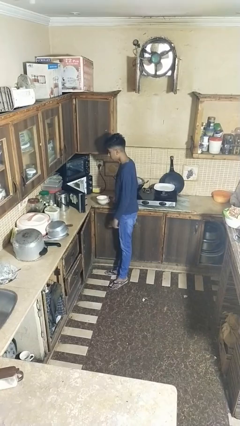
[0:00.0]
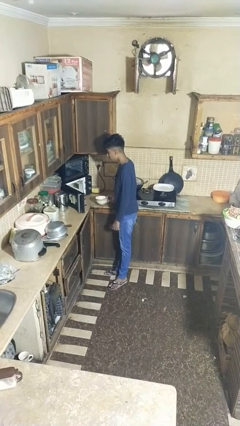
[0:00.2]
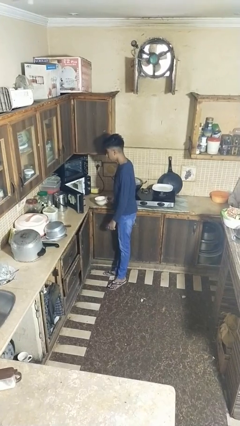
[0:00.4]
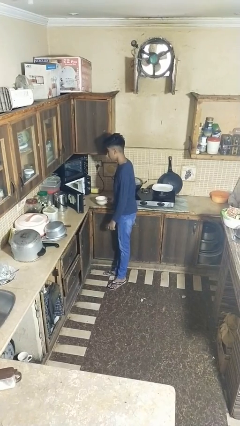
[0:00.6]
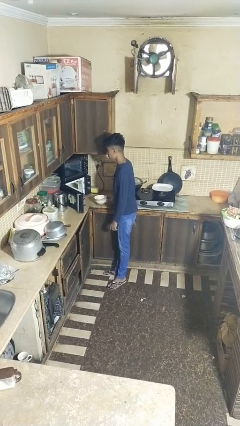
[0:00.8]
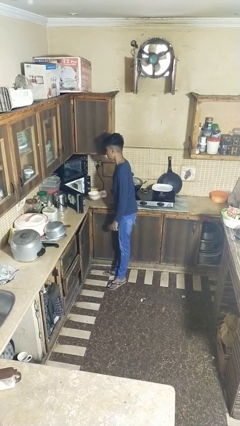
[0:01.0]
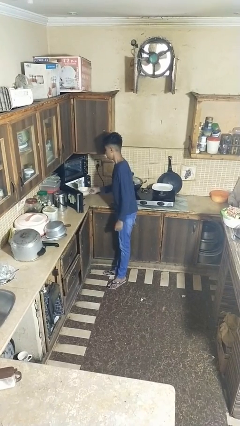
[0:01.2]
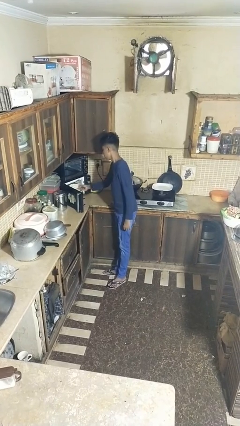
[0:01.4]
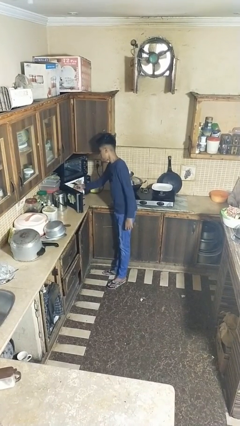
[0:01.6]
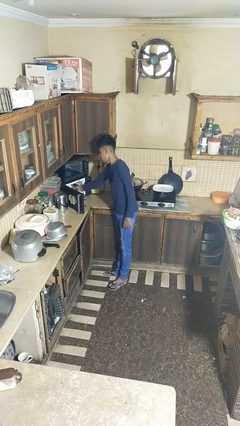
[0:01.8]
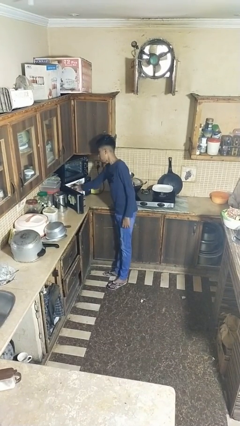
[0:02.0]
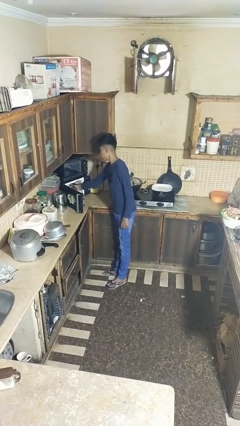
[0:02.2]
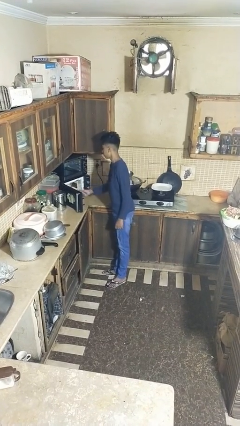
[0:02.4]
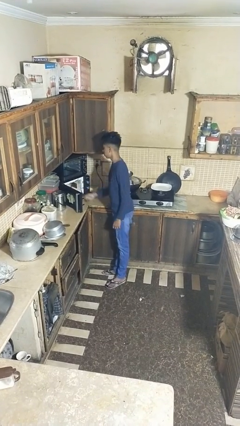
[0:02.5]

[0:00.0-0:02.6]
person puts object into microwave

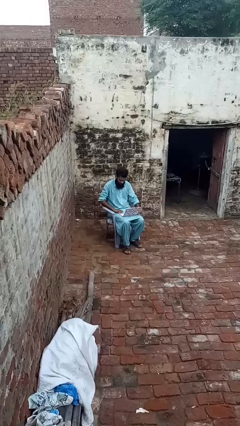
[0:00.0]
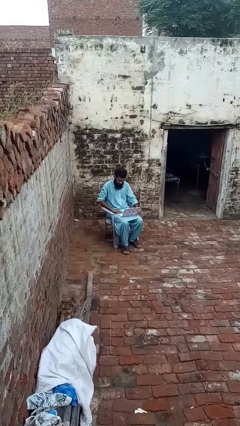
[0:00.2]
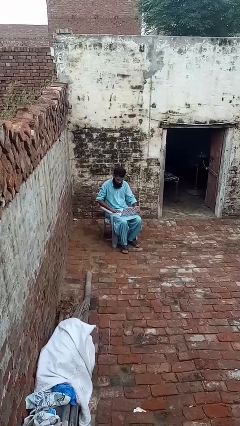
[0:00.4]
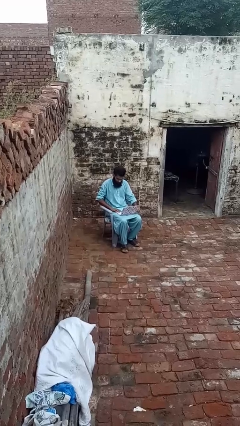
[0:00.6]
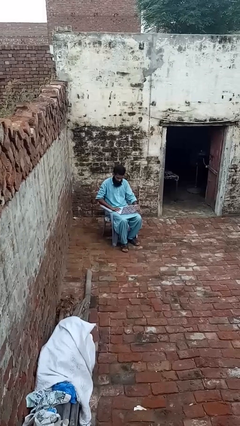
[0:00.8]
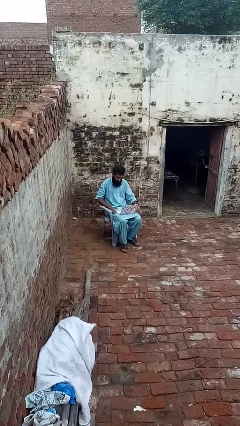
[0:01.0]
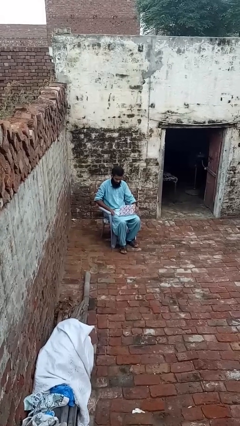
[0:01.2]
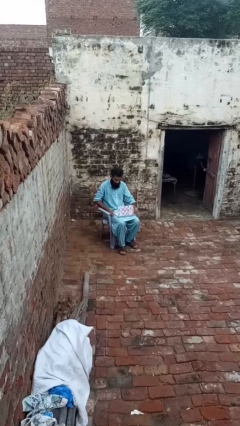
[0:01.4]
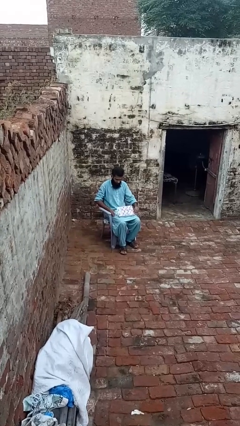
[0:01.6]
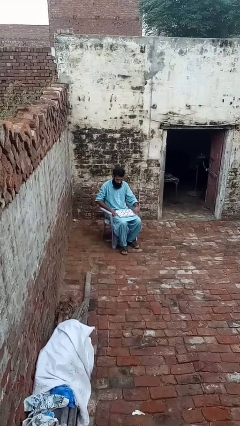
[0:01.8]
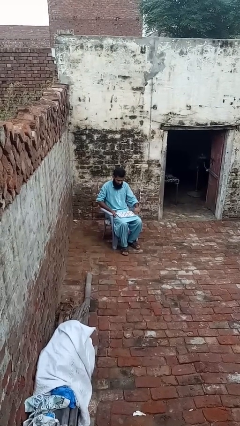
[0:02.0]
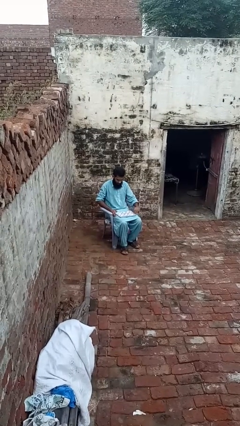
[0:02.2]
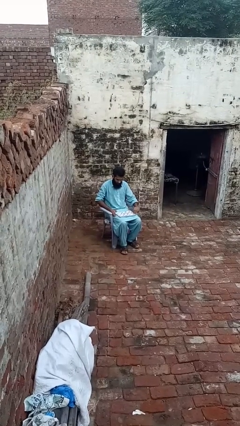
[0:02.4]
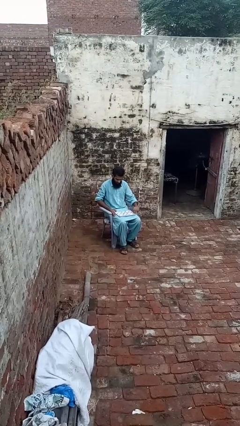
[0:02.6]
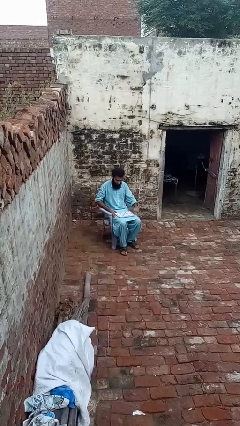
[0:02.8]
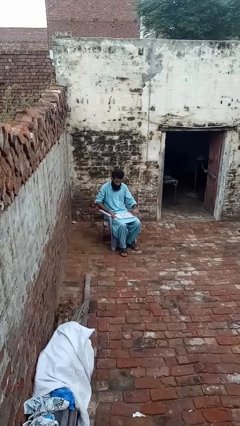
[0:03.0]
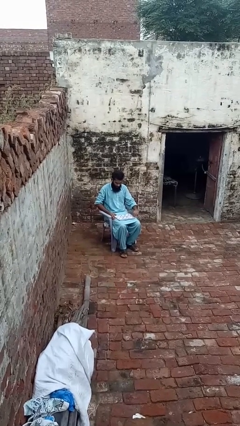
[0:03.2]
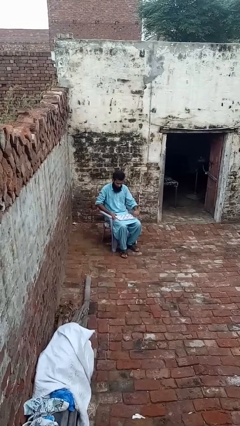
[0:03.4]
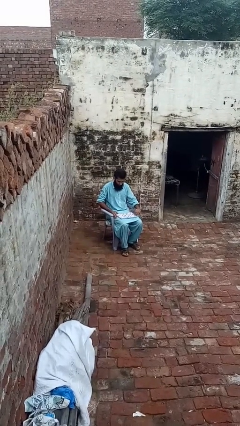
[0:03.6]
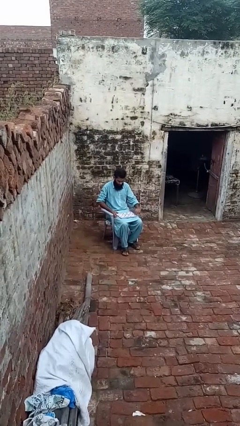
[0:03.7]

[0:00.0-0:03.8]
person closes laptop

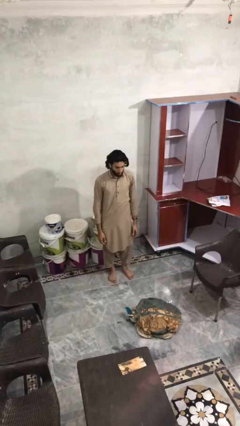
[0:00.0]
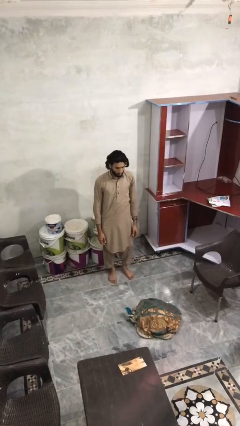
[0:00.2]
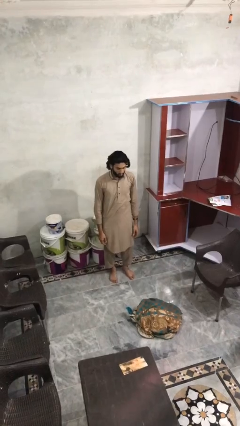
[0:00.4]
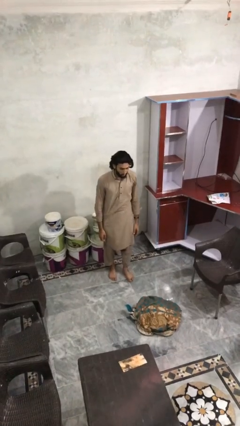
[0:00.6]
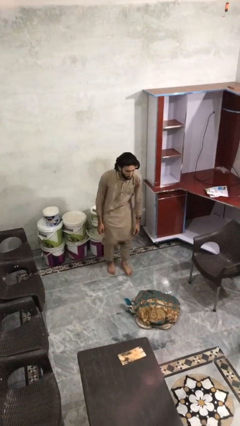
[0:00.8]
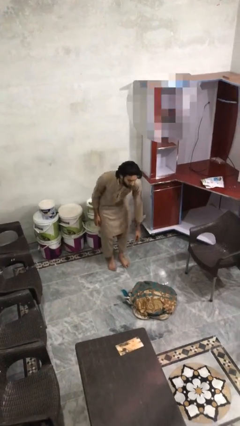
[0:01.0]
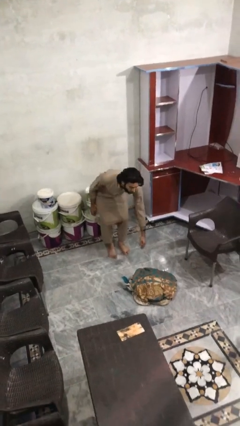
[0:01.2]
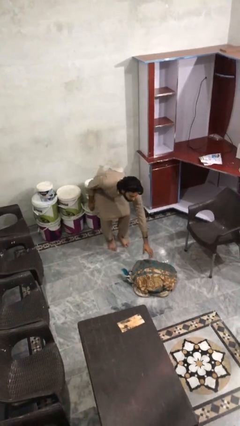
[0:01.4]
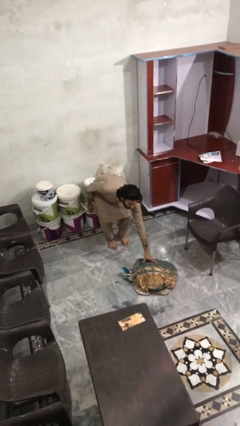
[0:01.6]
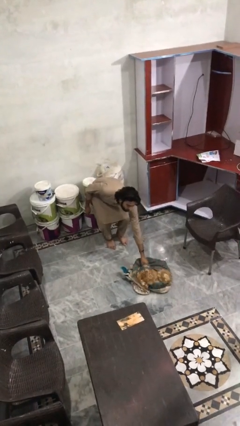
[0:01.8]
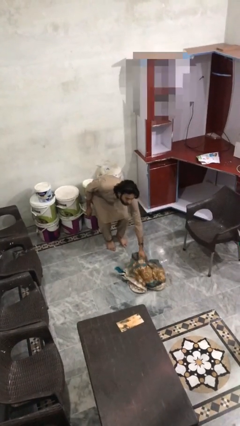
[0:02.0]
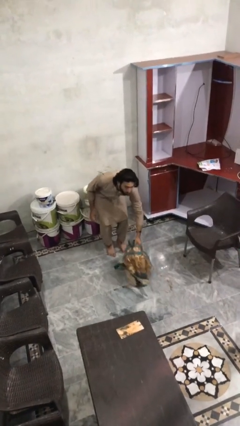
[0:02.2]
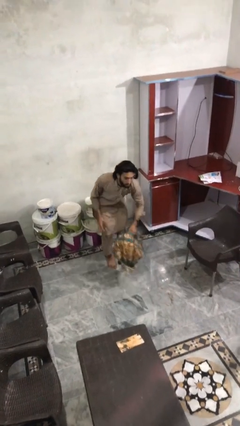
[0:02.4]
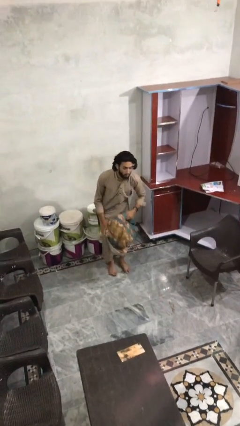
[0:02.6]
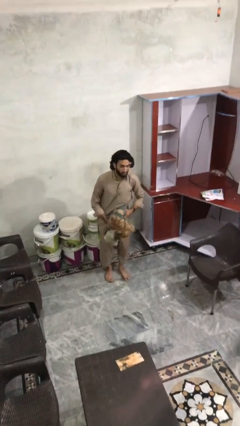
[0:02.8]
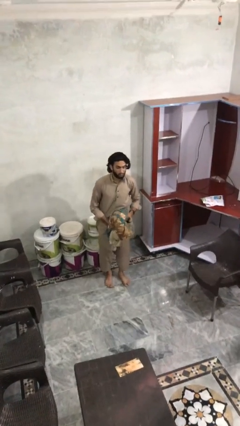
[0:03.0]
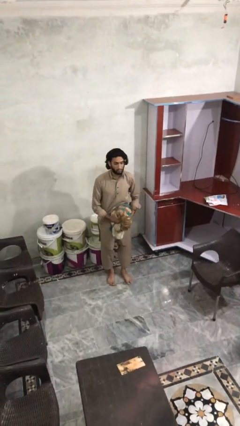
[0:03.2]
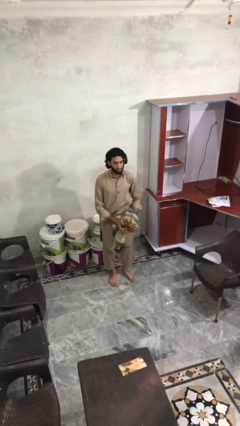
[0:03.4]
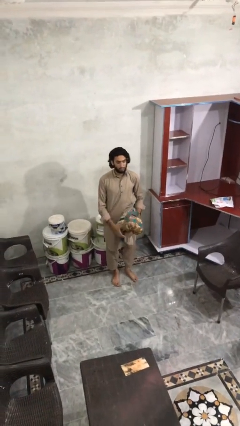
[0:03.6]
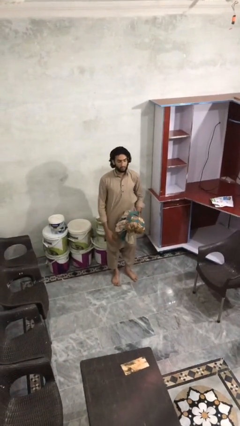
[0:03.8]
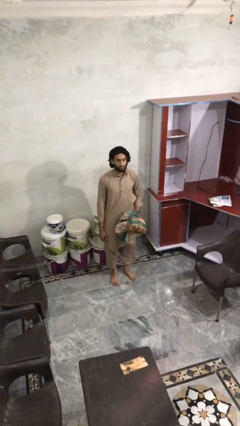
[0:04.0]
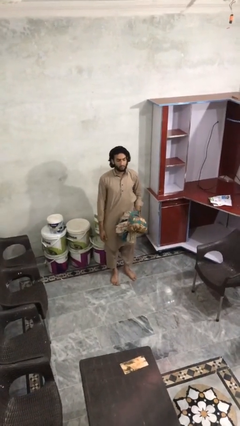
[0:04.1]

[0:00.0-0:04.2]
person picks up object from floor

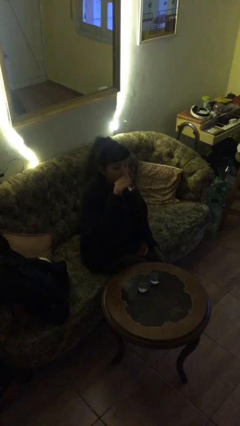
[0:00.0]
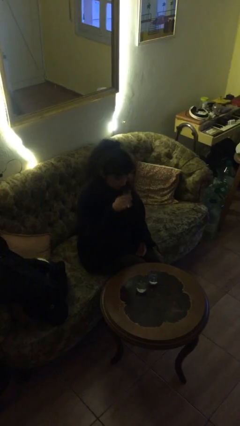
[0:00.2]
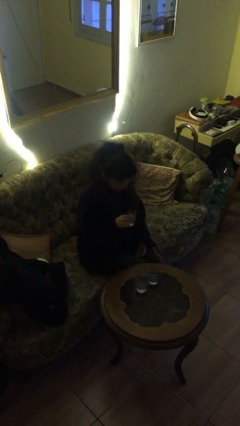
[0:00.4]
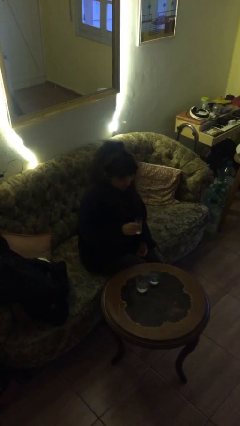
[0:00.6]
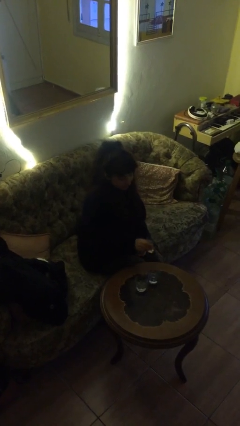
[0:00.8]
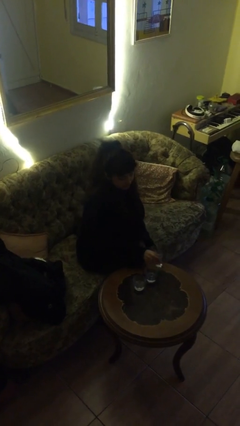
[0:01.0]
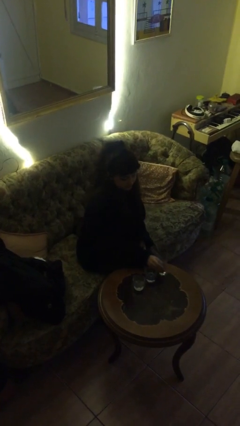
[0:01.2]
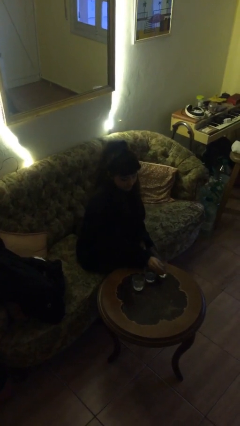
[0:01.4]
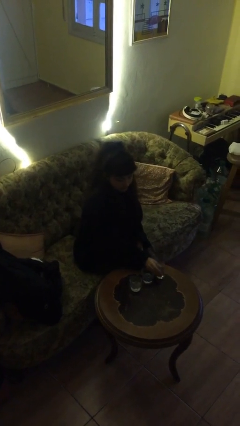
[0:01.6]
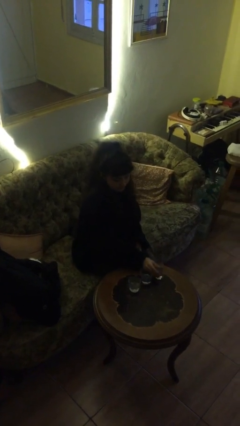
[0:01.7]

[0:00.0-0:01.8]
person puts down object on table

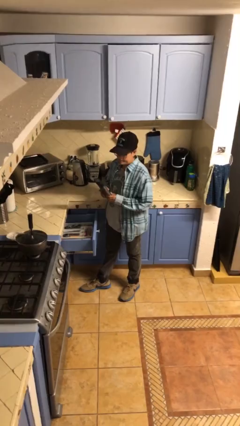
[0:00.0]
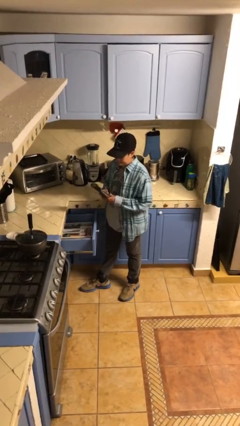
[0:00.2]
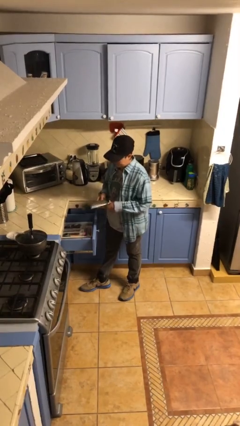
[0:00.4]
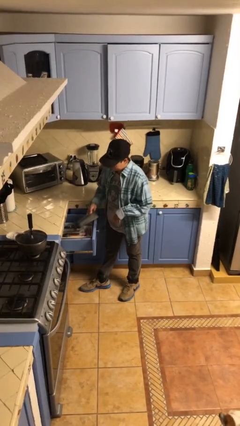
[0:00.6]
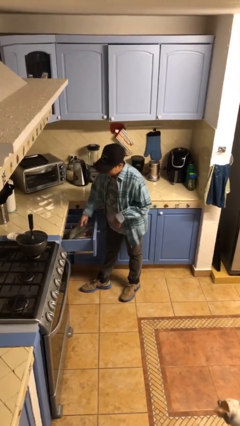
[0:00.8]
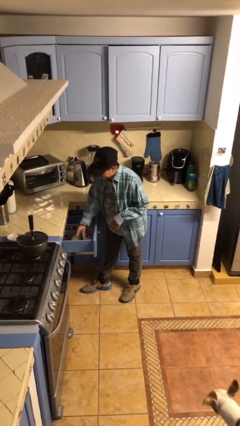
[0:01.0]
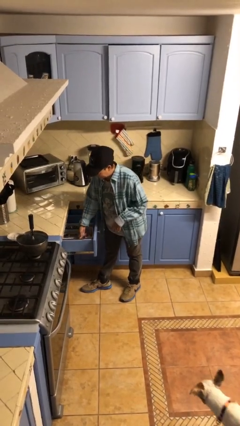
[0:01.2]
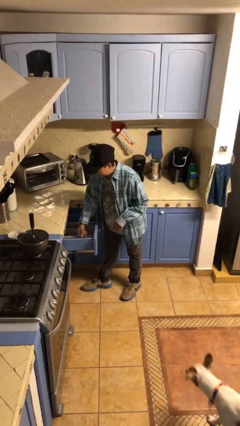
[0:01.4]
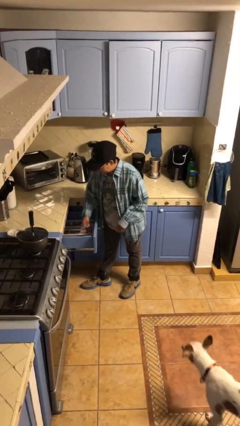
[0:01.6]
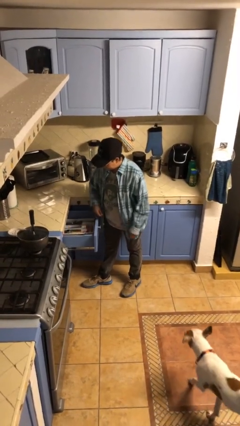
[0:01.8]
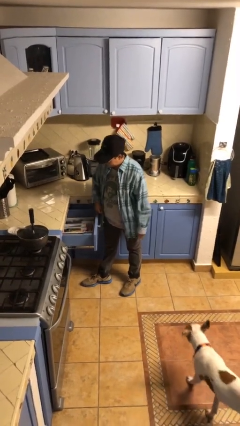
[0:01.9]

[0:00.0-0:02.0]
person puts object into kitchen drawer

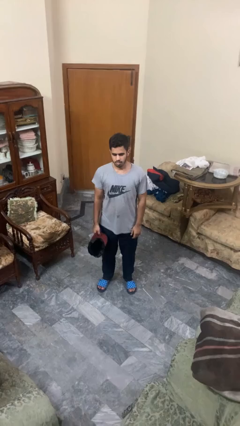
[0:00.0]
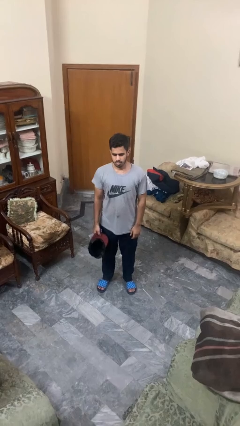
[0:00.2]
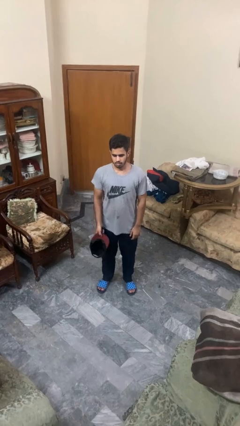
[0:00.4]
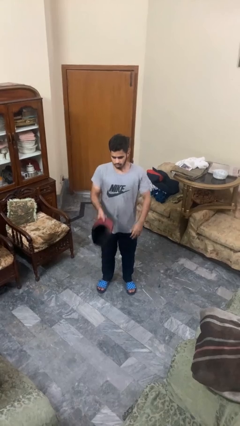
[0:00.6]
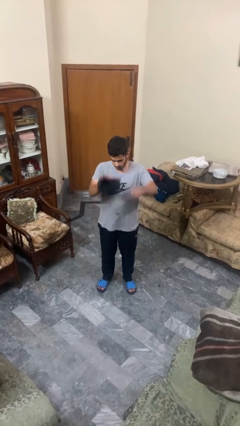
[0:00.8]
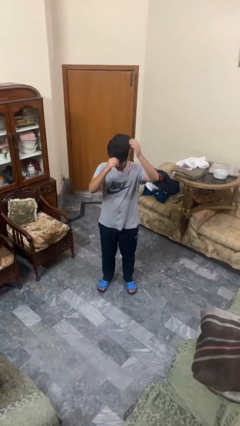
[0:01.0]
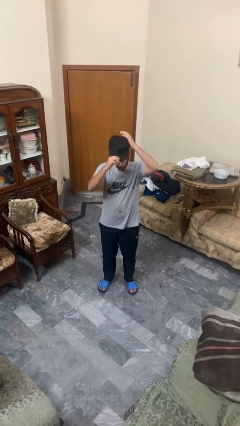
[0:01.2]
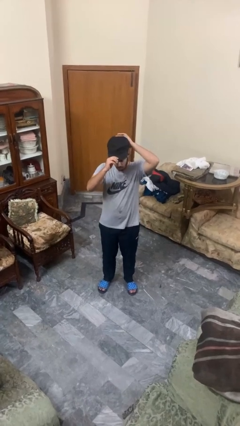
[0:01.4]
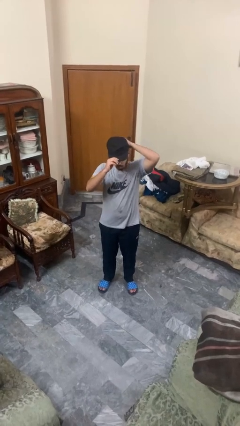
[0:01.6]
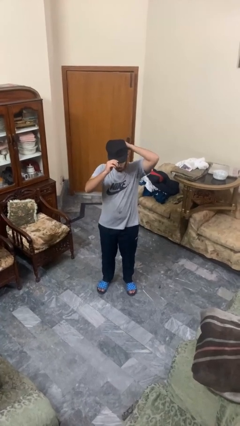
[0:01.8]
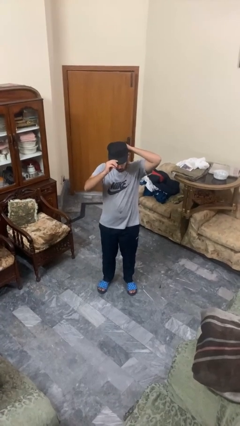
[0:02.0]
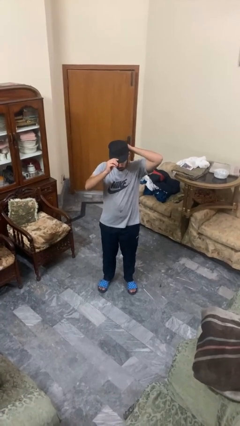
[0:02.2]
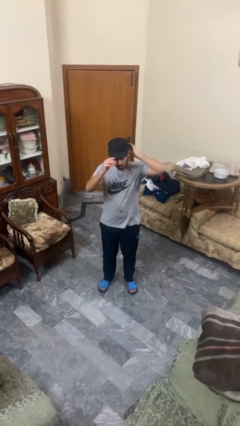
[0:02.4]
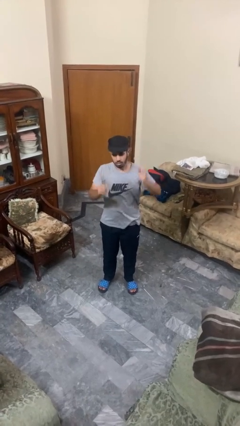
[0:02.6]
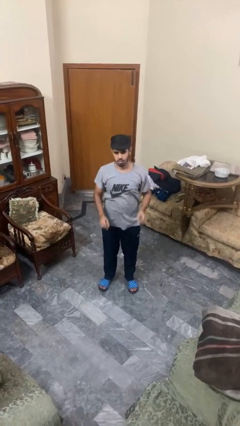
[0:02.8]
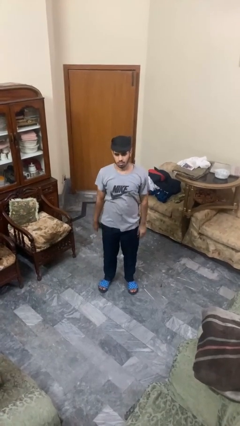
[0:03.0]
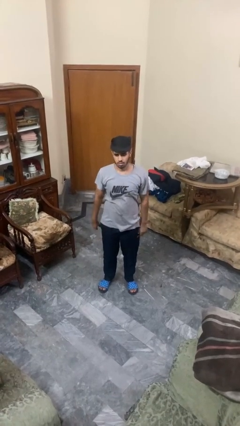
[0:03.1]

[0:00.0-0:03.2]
person puts on hat
